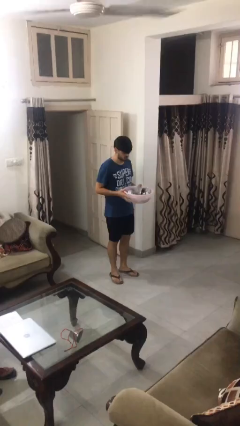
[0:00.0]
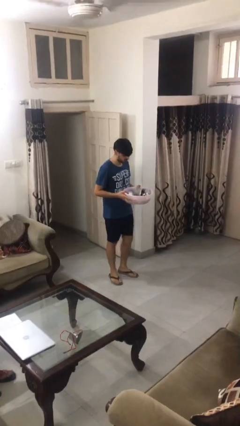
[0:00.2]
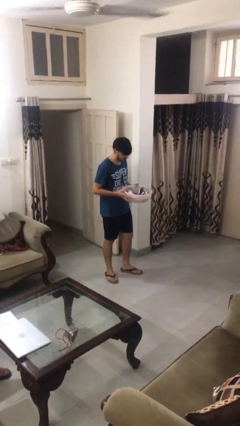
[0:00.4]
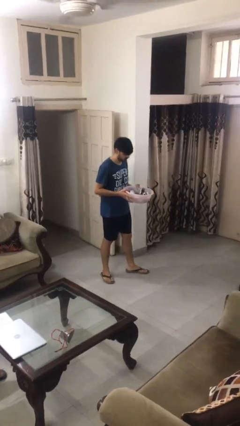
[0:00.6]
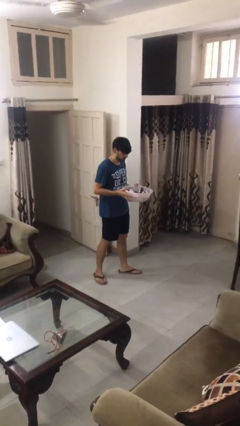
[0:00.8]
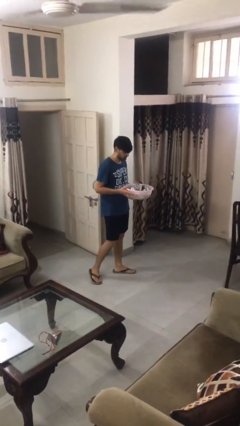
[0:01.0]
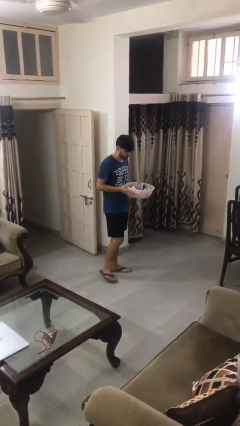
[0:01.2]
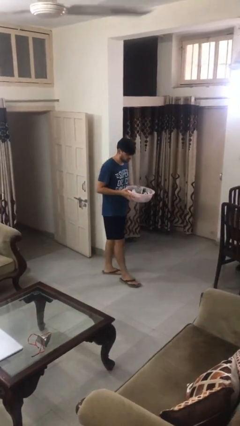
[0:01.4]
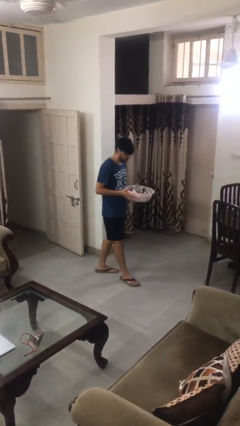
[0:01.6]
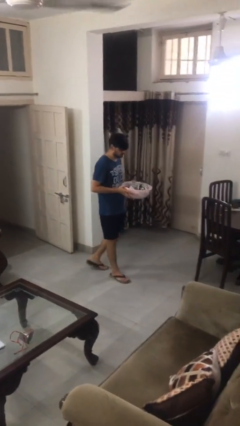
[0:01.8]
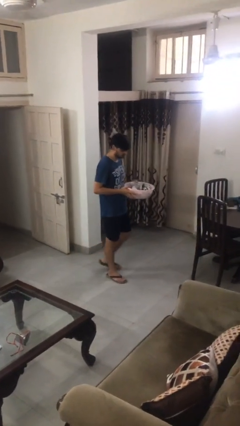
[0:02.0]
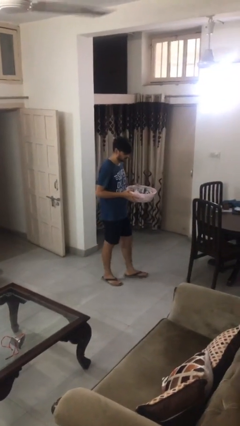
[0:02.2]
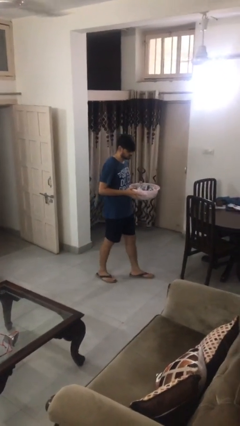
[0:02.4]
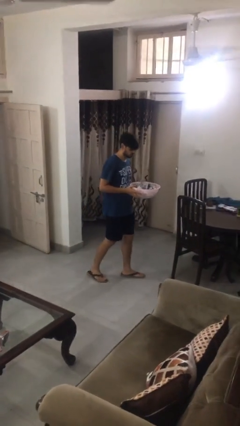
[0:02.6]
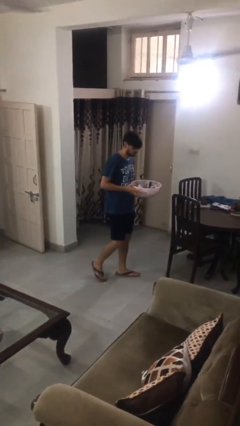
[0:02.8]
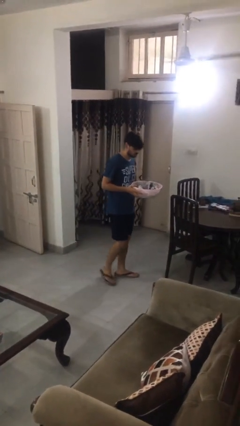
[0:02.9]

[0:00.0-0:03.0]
person carries groceries

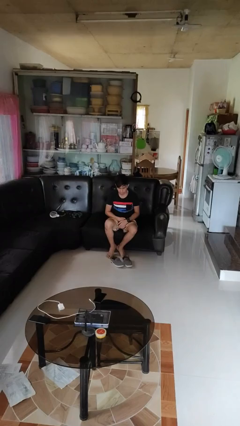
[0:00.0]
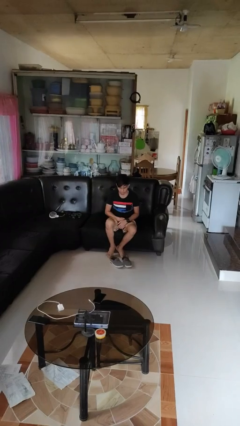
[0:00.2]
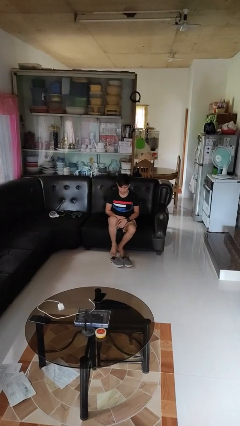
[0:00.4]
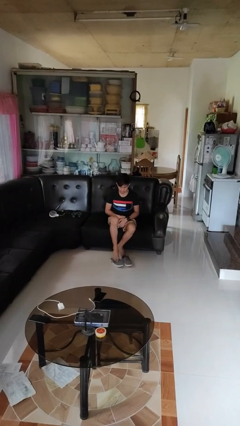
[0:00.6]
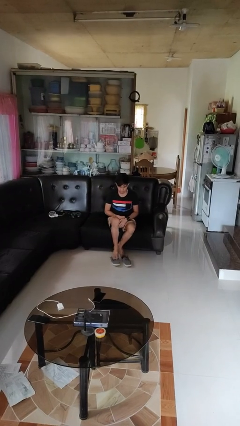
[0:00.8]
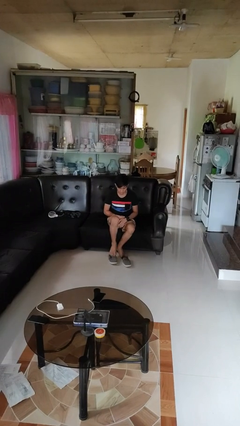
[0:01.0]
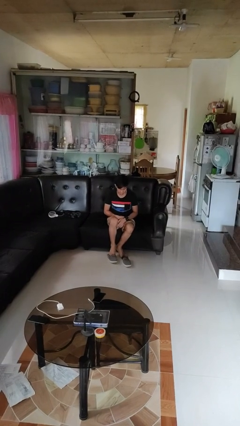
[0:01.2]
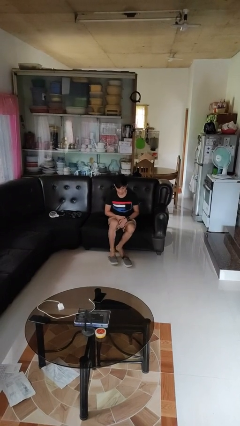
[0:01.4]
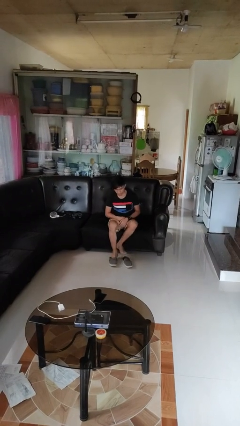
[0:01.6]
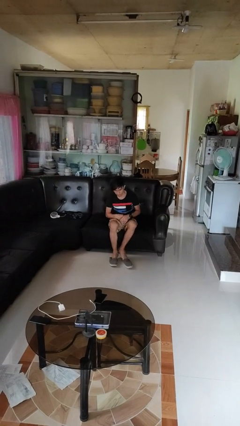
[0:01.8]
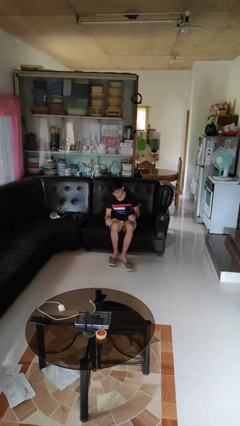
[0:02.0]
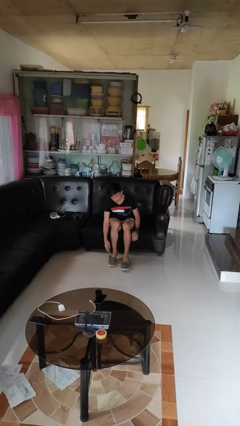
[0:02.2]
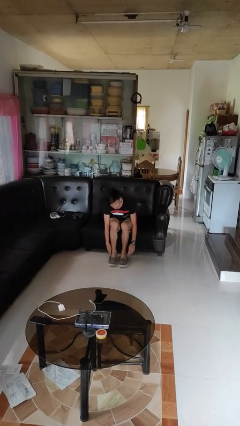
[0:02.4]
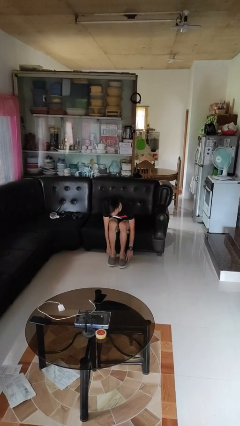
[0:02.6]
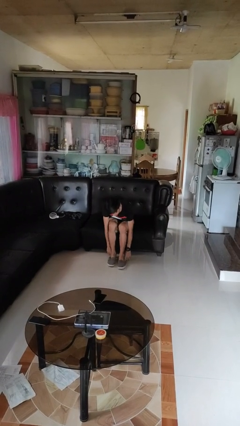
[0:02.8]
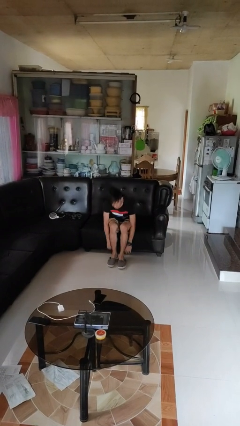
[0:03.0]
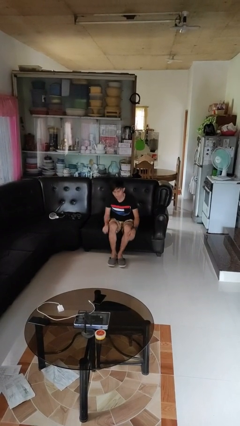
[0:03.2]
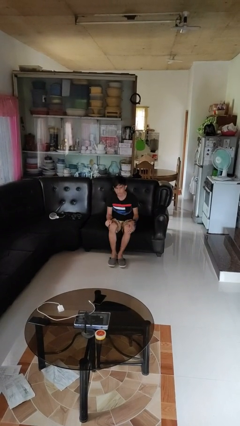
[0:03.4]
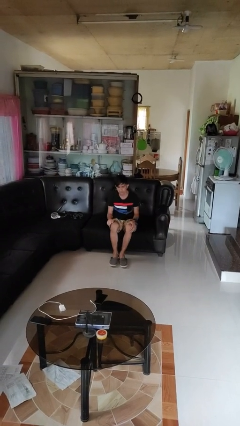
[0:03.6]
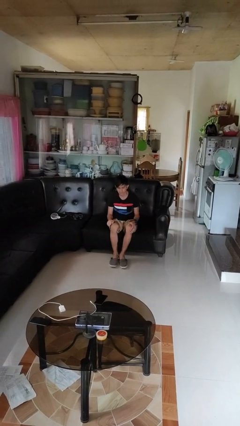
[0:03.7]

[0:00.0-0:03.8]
person puts on shoes

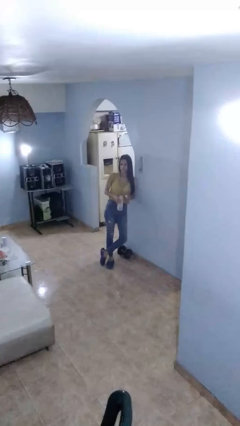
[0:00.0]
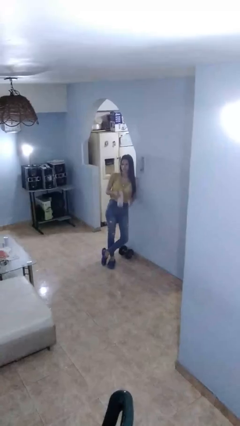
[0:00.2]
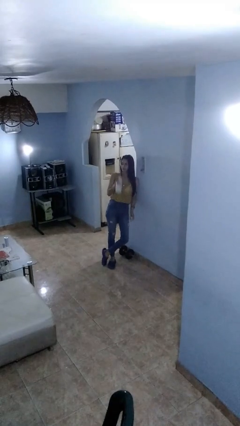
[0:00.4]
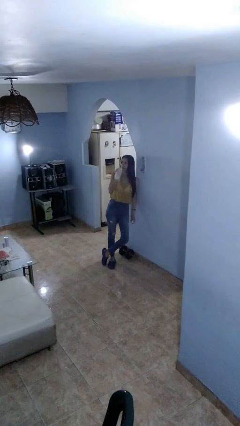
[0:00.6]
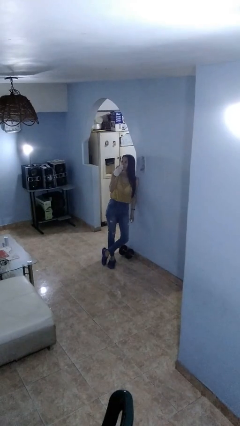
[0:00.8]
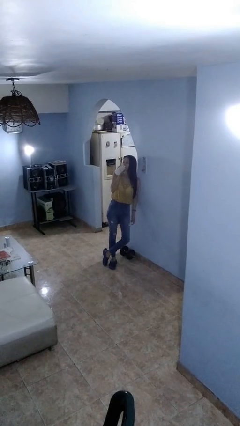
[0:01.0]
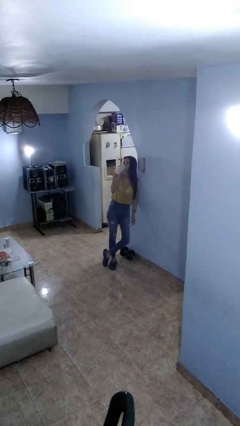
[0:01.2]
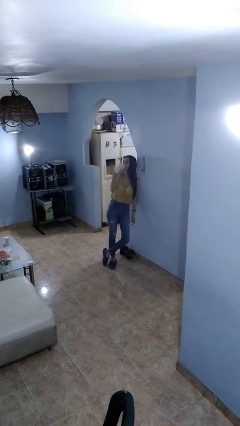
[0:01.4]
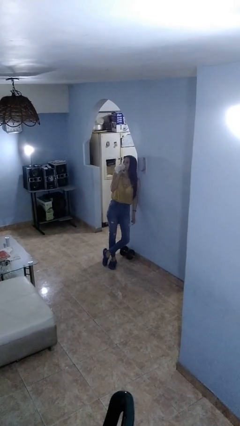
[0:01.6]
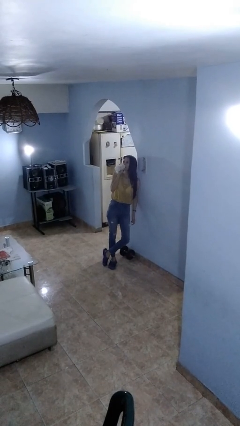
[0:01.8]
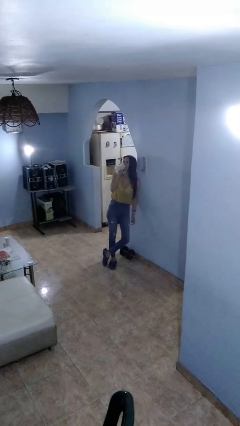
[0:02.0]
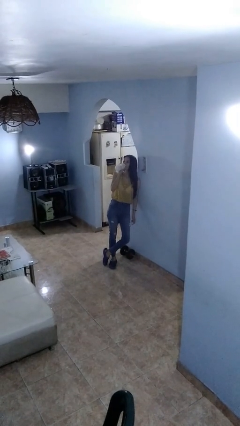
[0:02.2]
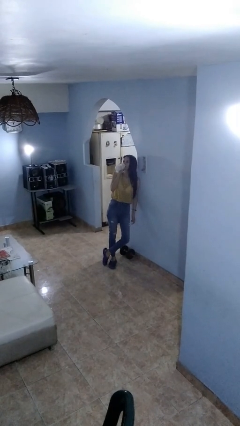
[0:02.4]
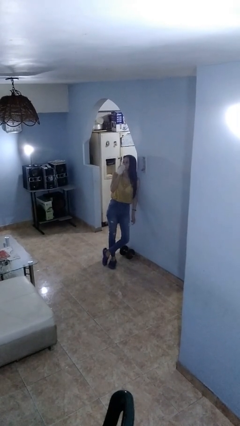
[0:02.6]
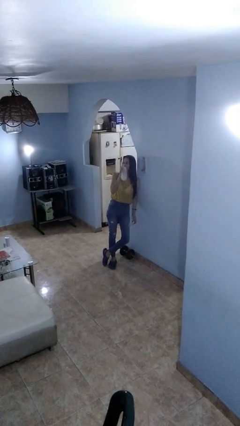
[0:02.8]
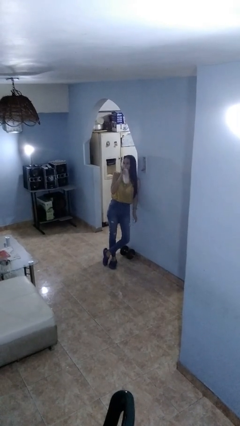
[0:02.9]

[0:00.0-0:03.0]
person drinks from bottle

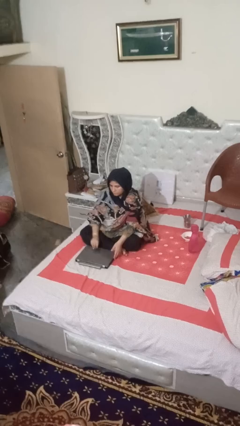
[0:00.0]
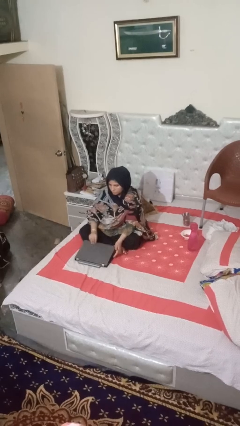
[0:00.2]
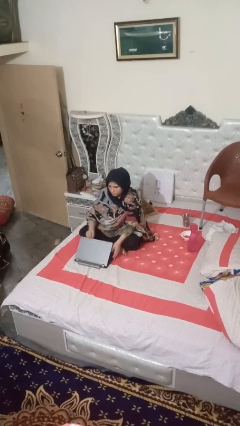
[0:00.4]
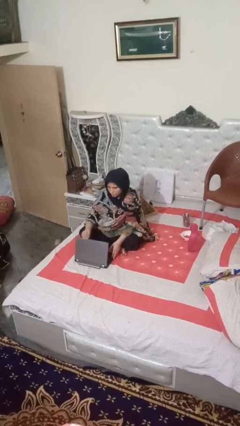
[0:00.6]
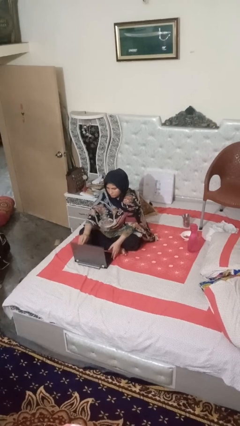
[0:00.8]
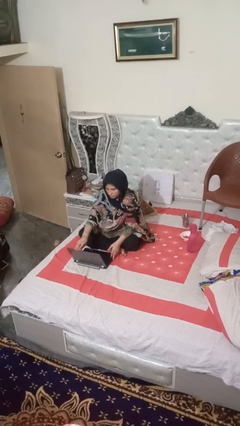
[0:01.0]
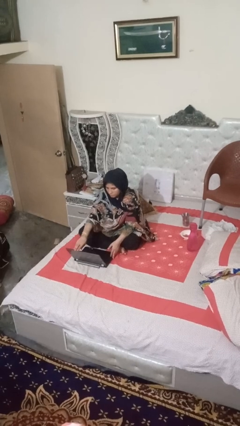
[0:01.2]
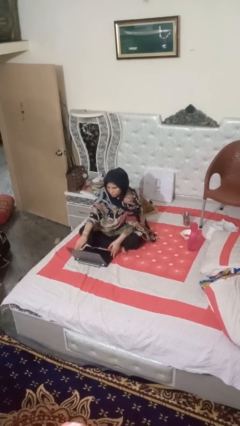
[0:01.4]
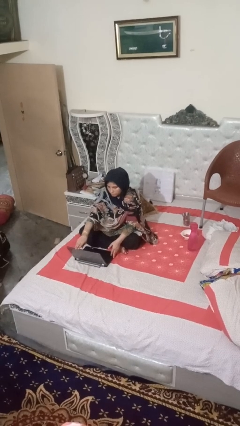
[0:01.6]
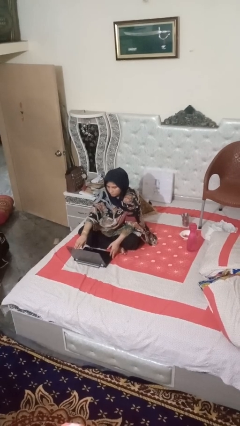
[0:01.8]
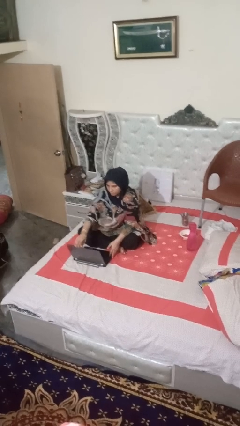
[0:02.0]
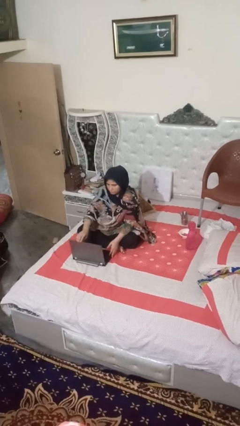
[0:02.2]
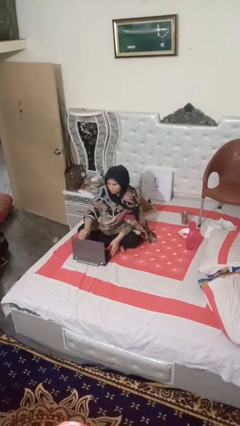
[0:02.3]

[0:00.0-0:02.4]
person opens laptop

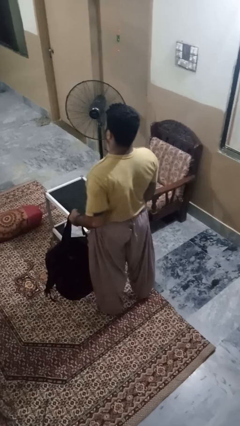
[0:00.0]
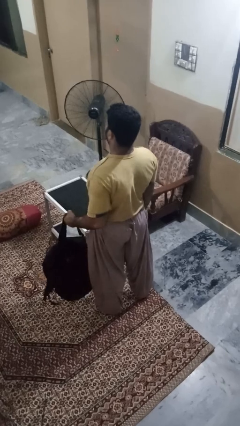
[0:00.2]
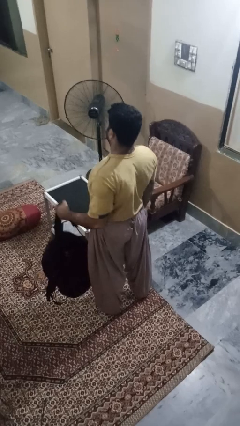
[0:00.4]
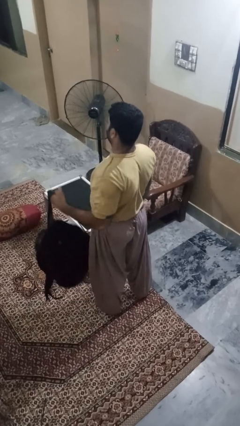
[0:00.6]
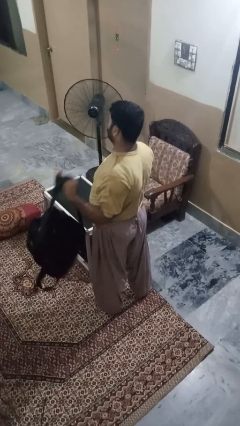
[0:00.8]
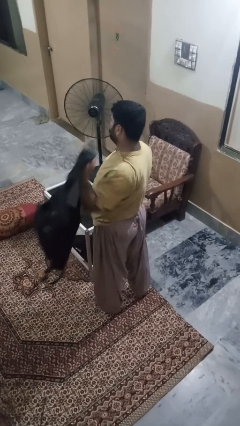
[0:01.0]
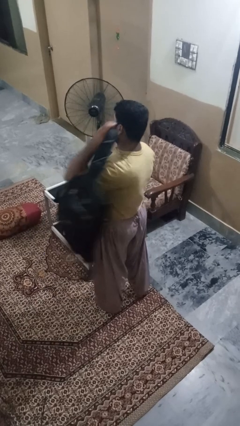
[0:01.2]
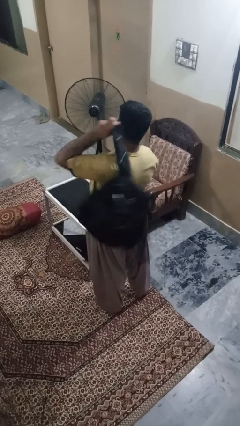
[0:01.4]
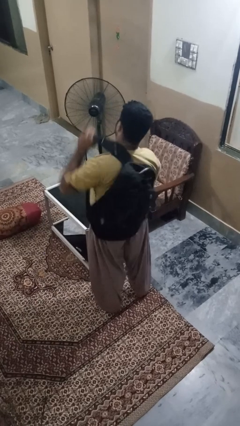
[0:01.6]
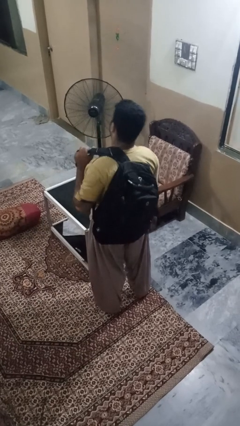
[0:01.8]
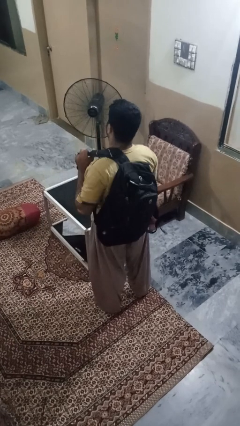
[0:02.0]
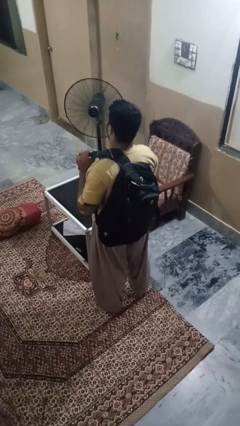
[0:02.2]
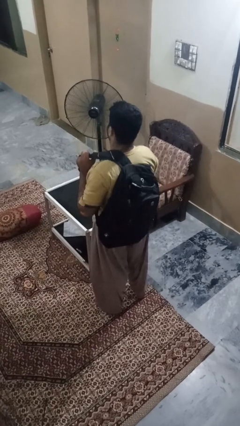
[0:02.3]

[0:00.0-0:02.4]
person puts on backpack

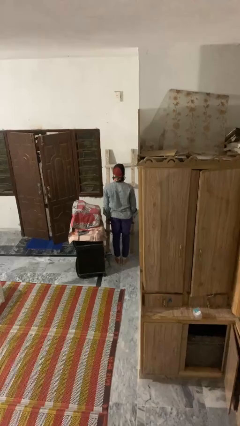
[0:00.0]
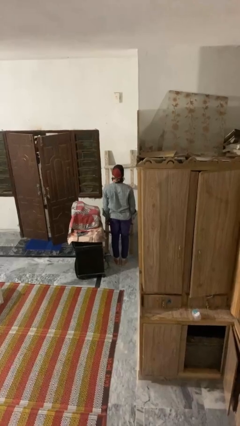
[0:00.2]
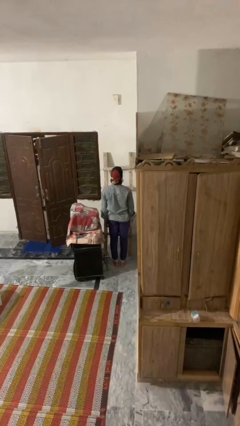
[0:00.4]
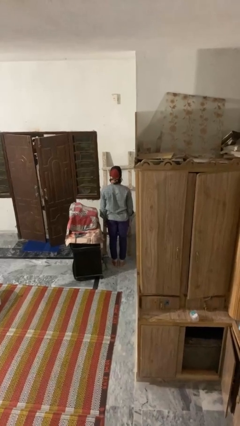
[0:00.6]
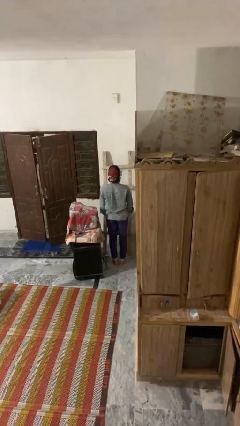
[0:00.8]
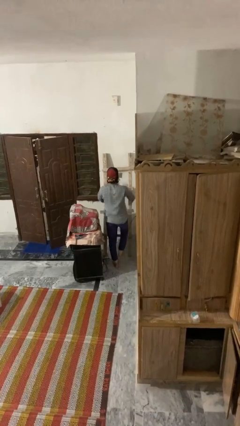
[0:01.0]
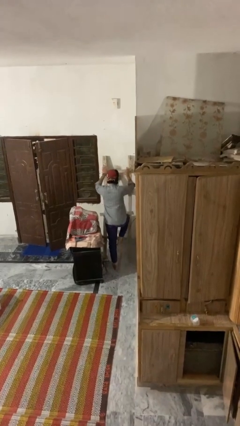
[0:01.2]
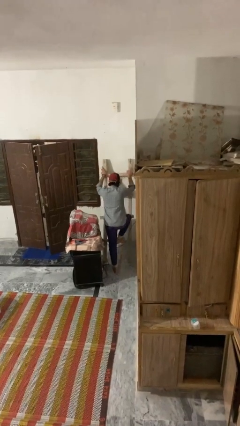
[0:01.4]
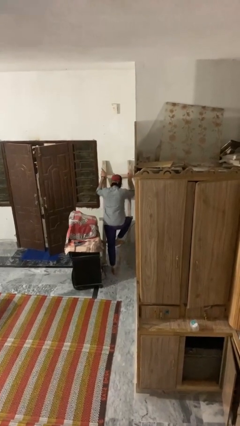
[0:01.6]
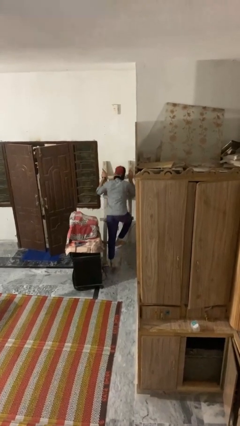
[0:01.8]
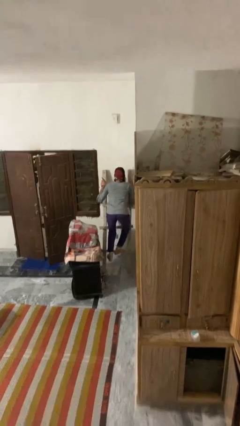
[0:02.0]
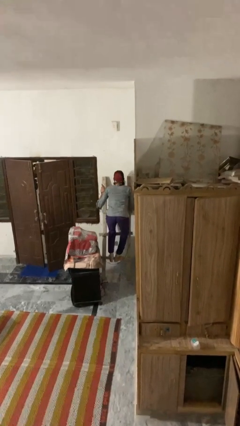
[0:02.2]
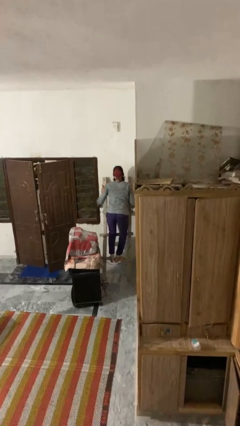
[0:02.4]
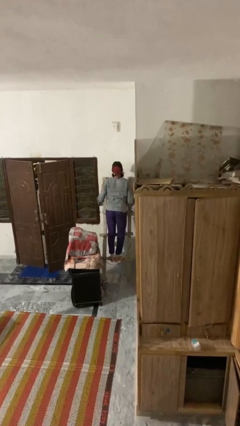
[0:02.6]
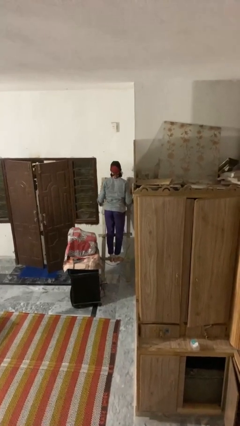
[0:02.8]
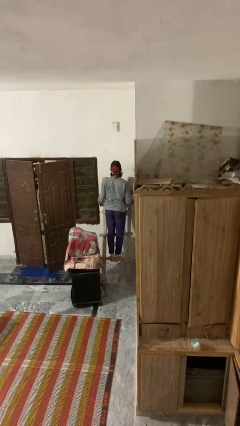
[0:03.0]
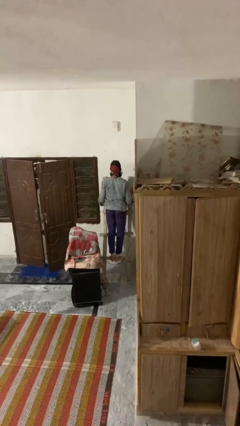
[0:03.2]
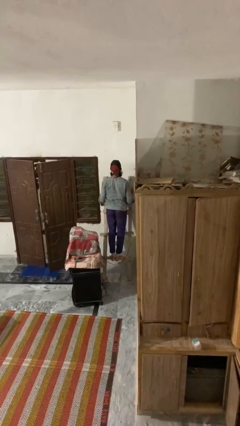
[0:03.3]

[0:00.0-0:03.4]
person climbs up ladder
